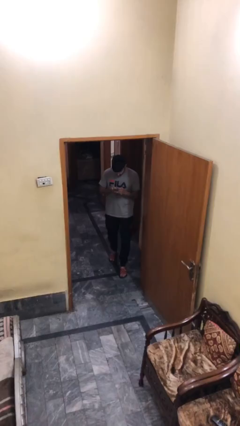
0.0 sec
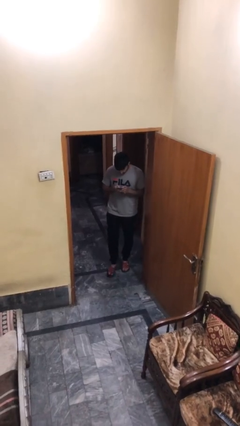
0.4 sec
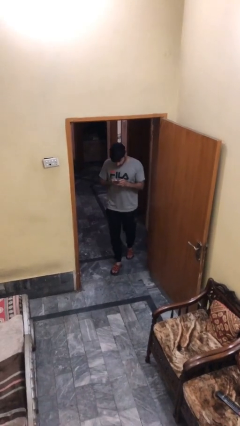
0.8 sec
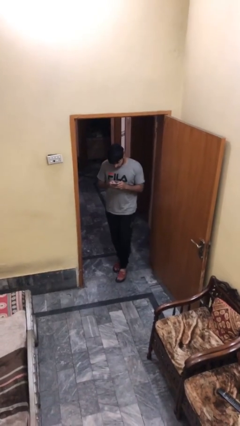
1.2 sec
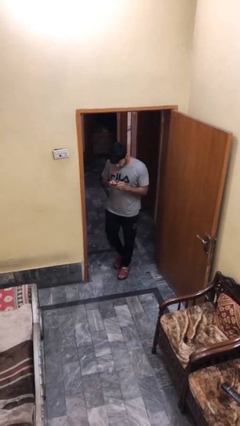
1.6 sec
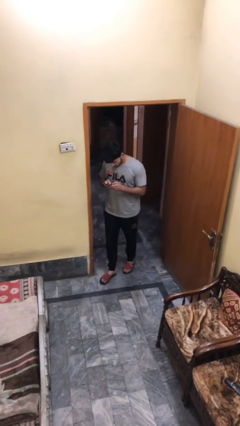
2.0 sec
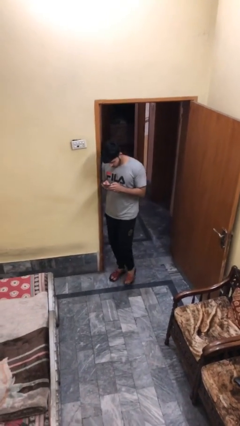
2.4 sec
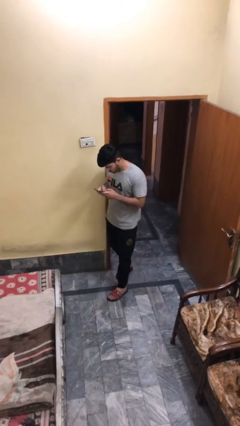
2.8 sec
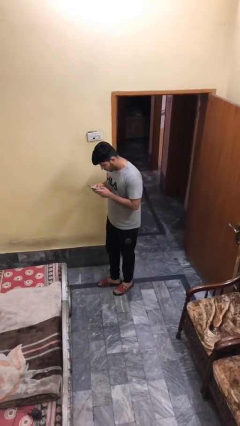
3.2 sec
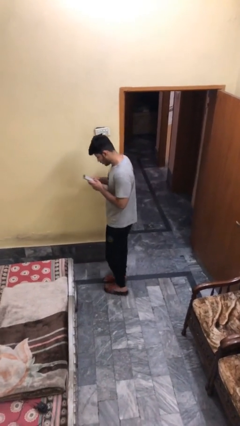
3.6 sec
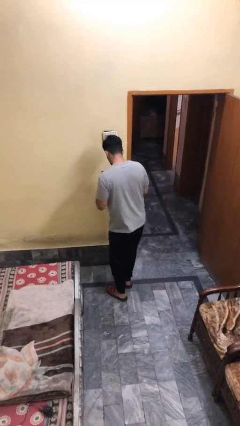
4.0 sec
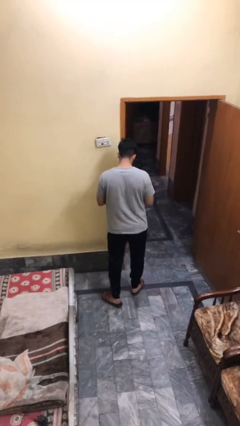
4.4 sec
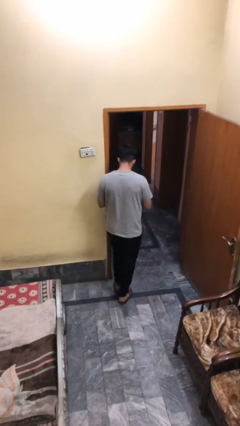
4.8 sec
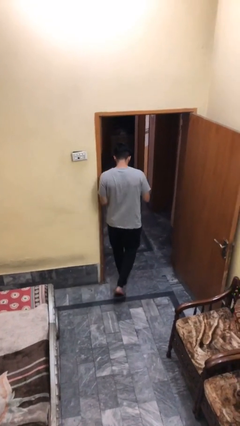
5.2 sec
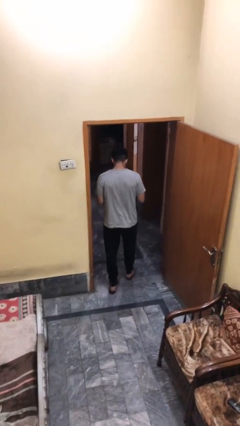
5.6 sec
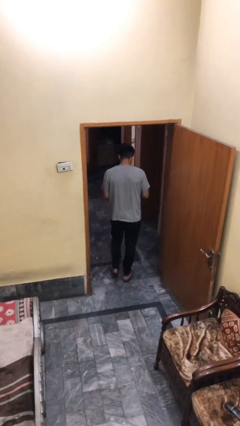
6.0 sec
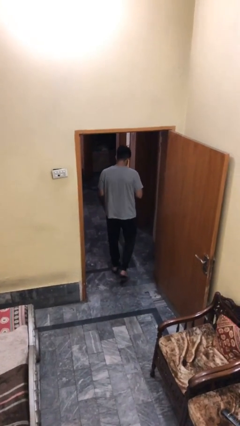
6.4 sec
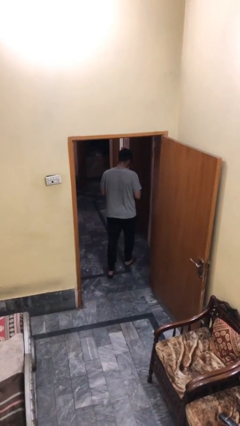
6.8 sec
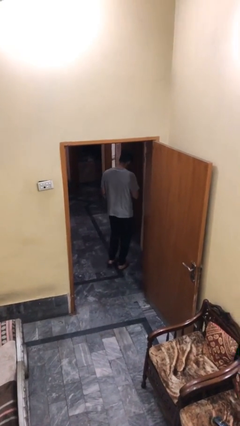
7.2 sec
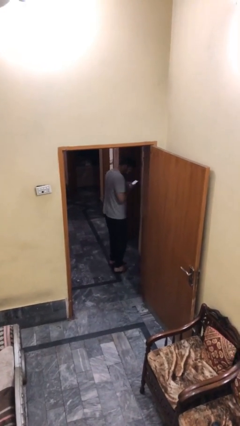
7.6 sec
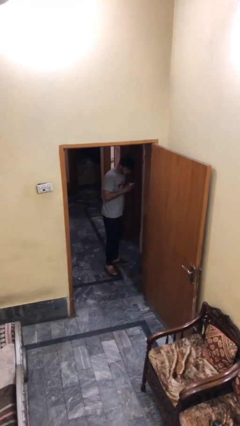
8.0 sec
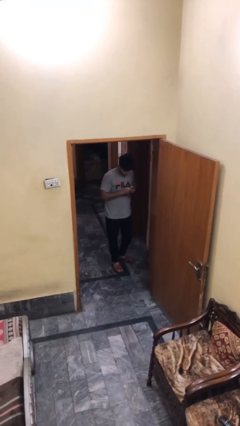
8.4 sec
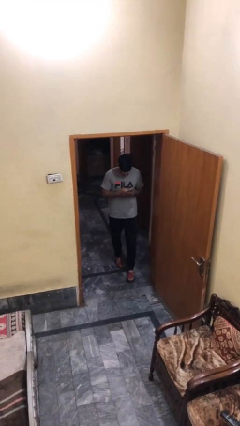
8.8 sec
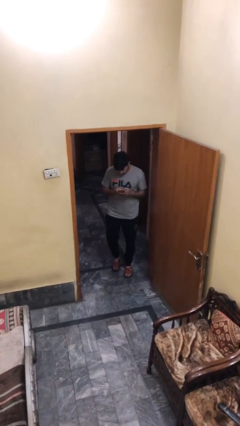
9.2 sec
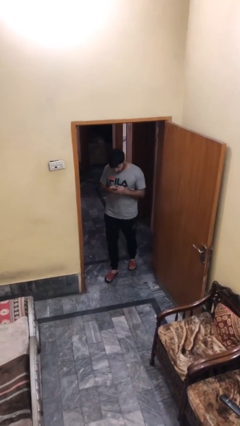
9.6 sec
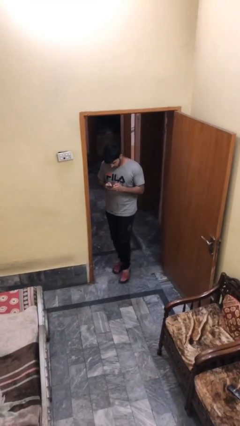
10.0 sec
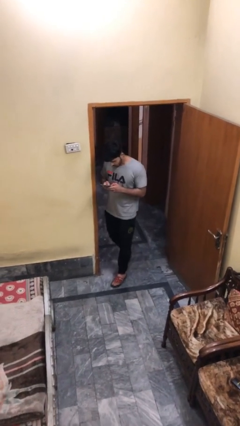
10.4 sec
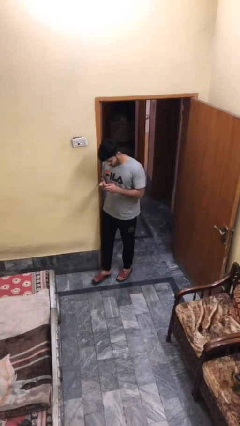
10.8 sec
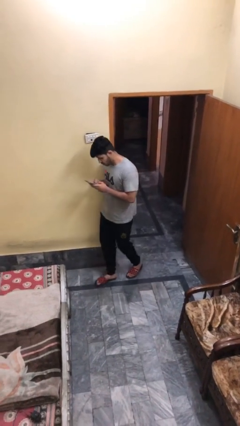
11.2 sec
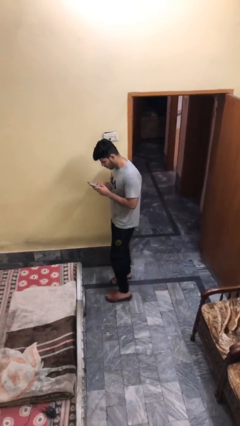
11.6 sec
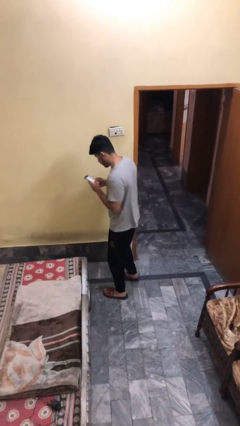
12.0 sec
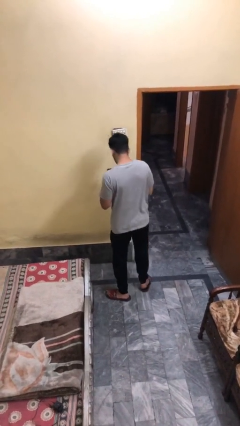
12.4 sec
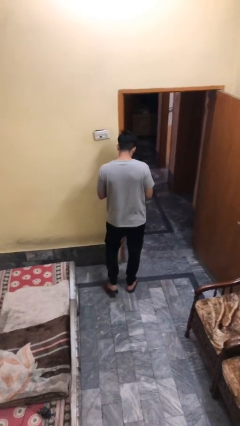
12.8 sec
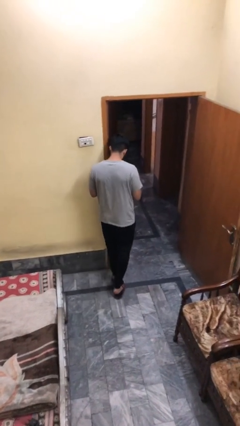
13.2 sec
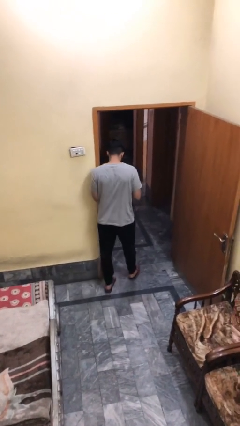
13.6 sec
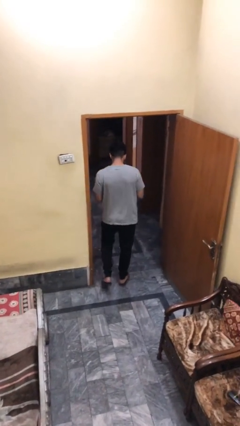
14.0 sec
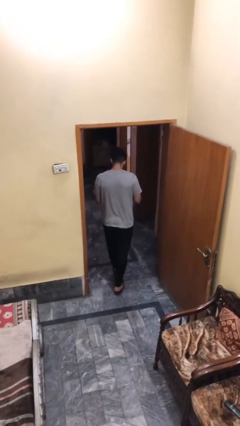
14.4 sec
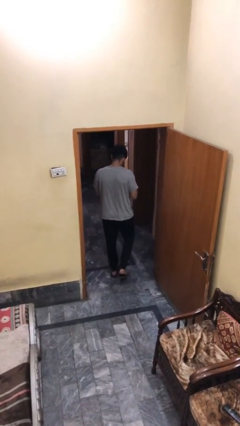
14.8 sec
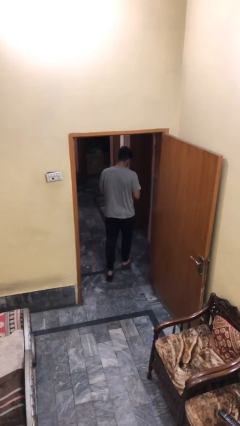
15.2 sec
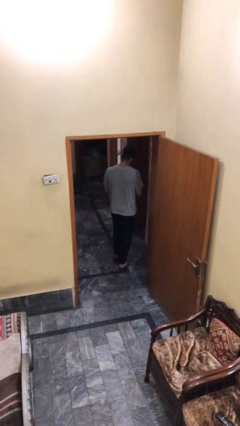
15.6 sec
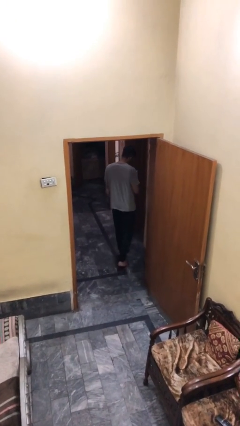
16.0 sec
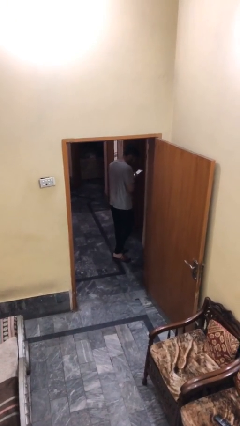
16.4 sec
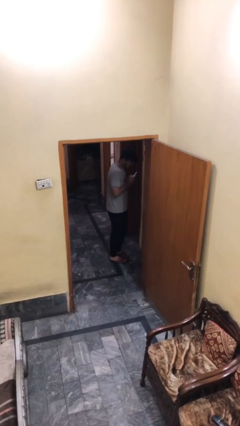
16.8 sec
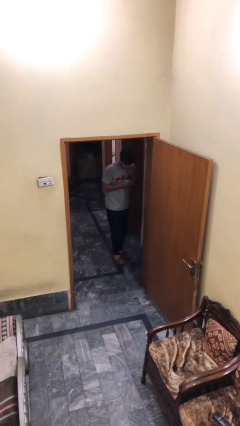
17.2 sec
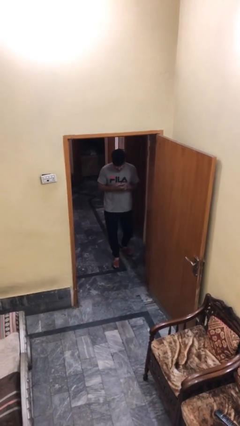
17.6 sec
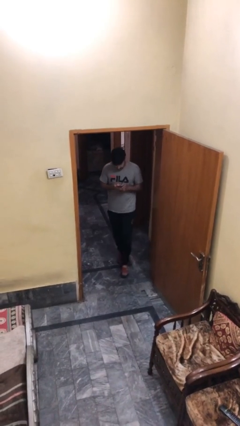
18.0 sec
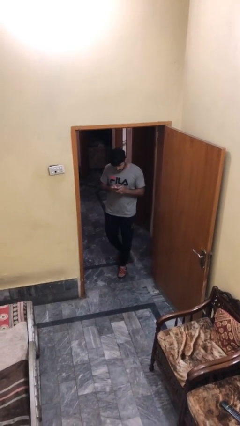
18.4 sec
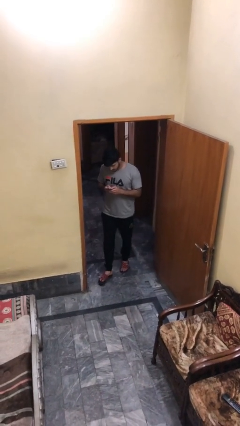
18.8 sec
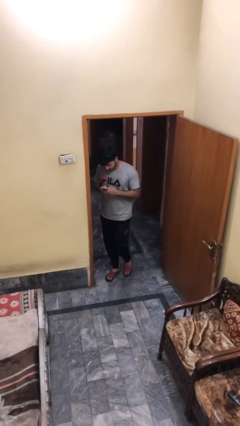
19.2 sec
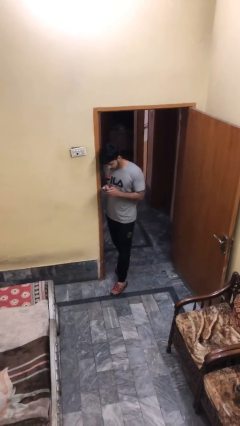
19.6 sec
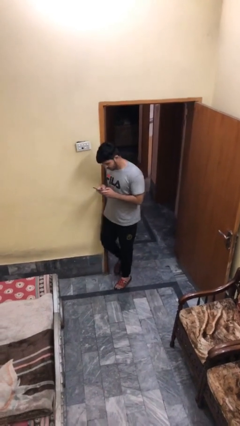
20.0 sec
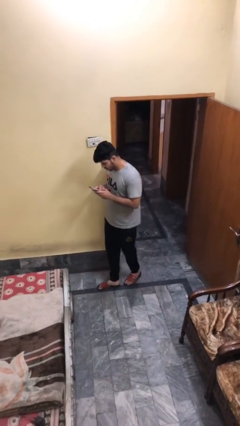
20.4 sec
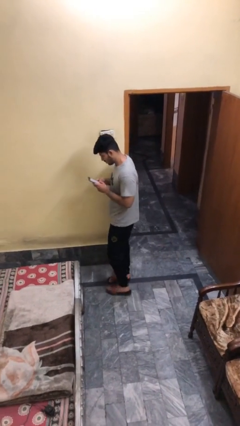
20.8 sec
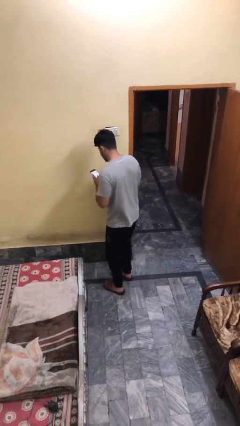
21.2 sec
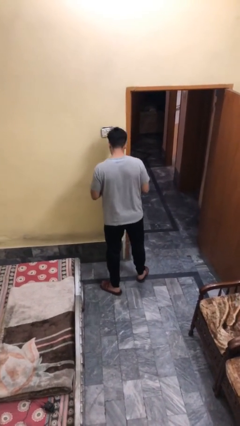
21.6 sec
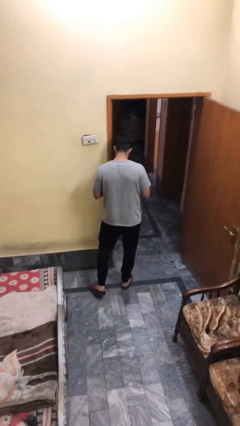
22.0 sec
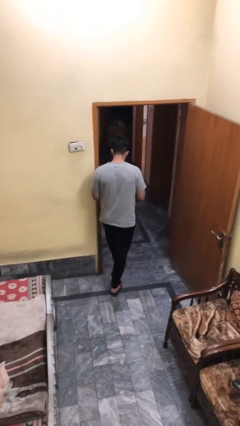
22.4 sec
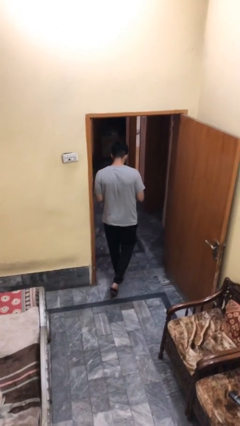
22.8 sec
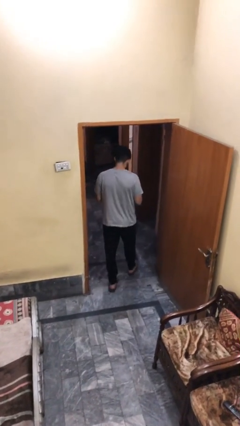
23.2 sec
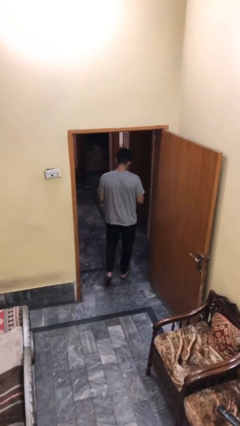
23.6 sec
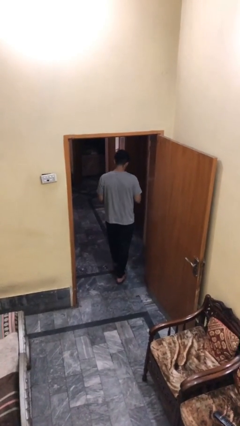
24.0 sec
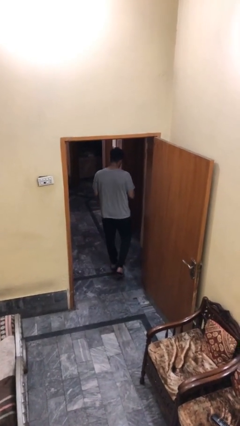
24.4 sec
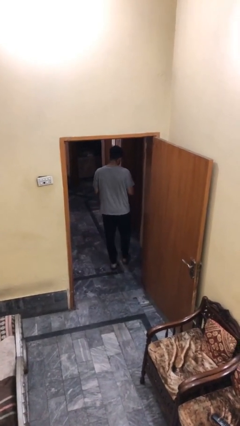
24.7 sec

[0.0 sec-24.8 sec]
person texts on phone

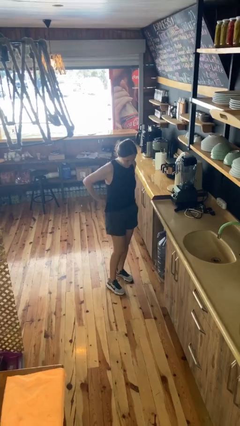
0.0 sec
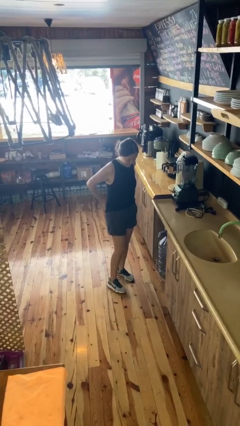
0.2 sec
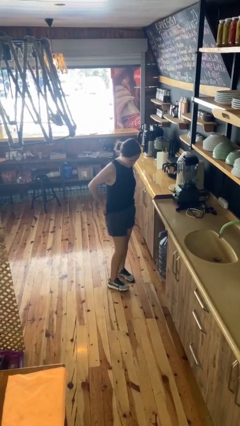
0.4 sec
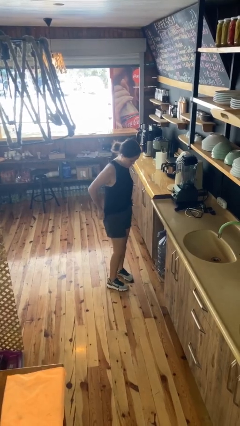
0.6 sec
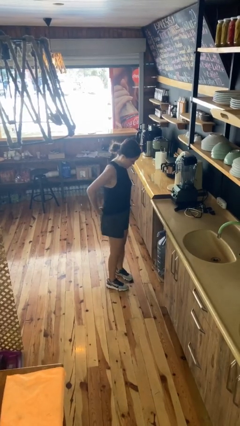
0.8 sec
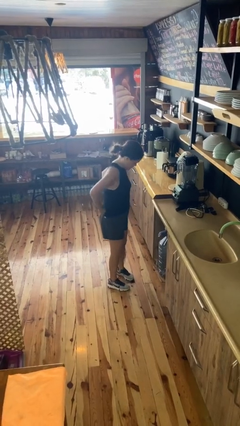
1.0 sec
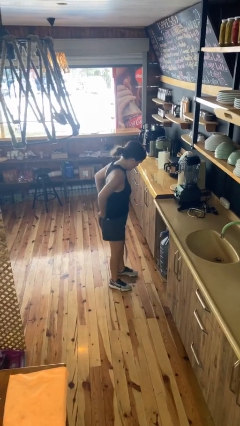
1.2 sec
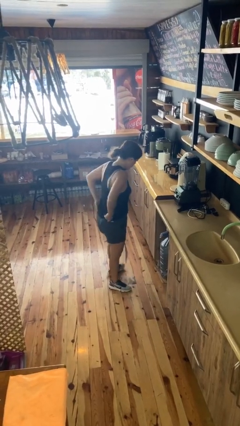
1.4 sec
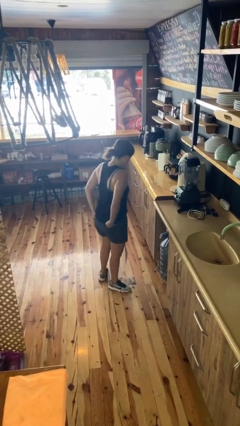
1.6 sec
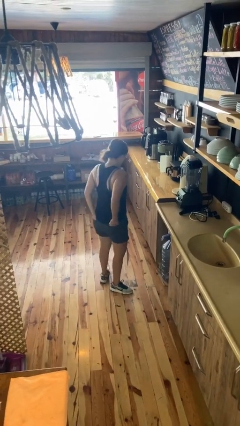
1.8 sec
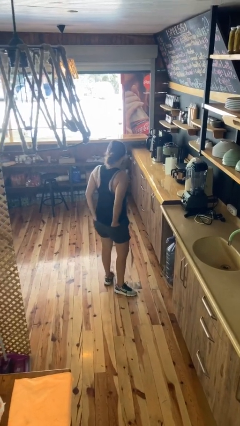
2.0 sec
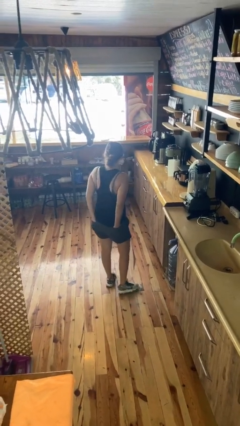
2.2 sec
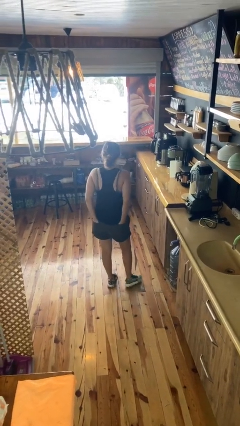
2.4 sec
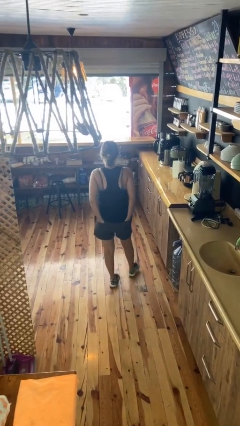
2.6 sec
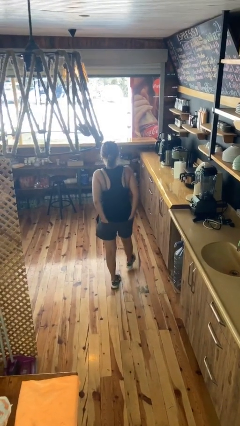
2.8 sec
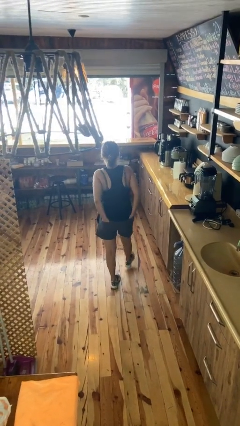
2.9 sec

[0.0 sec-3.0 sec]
person puts hands in back pockets

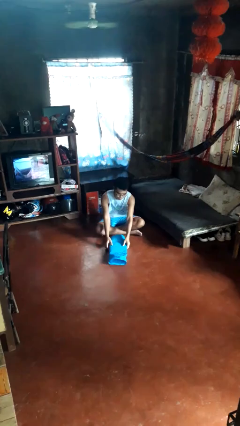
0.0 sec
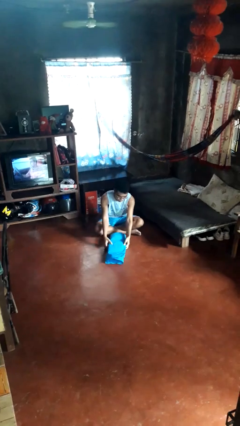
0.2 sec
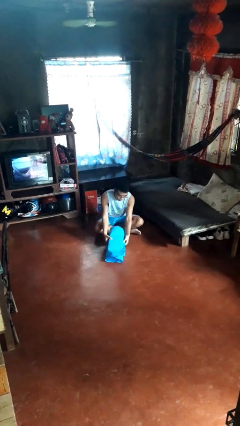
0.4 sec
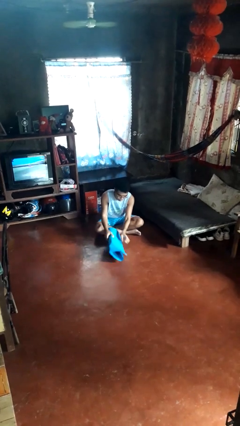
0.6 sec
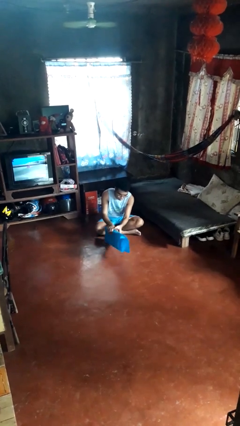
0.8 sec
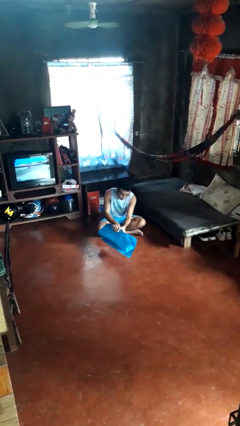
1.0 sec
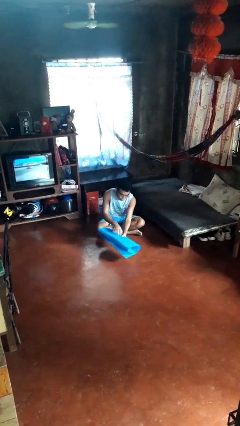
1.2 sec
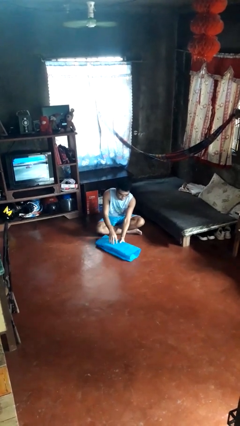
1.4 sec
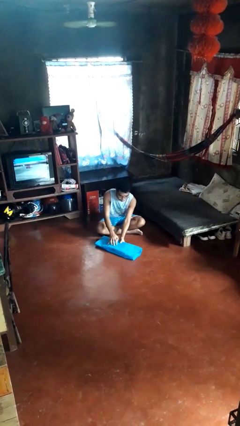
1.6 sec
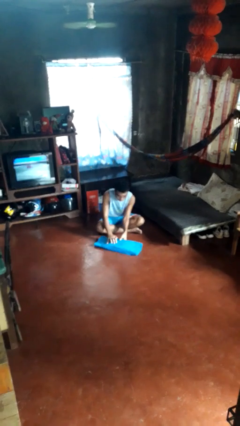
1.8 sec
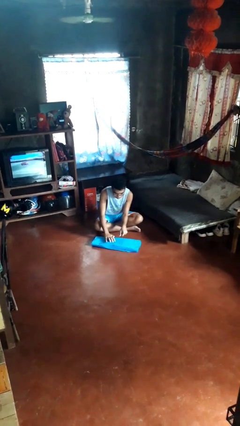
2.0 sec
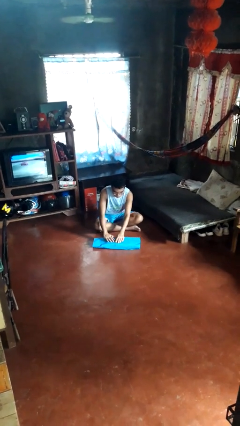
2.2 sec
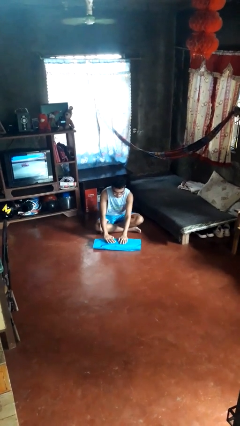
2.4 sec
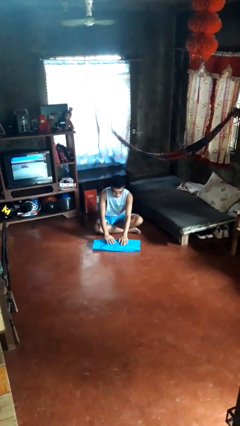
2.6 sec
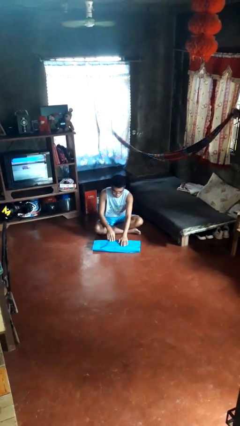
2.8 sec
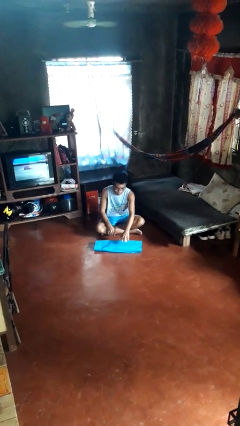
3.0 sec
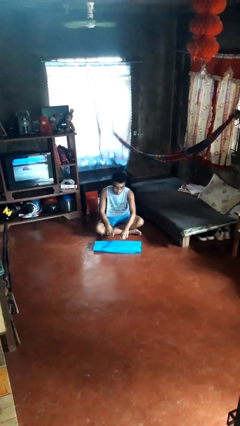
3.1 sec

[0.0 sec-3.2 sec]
person wraps box
